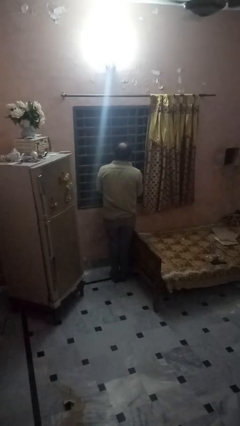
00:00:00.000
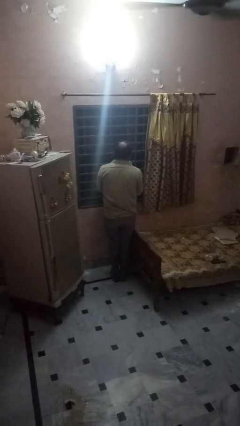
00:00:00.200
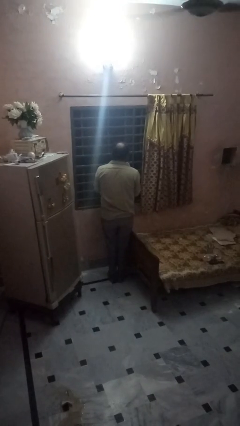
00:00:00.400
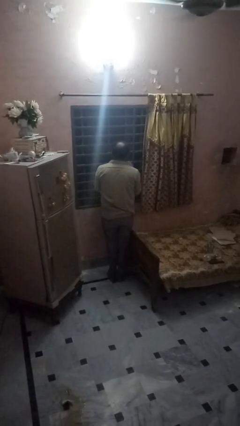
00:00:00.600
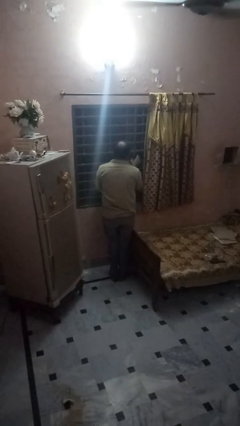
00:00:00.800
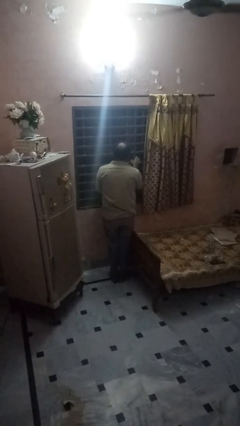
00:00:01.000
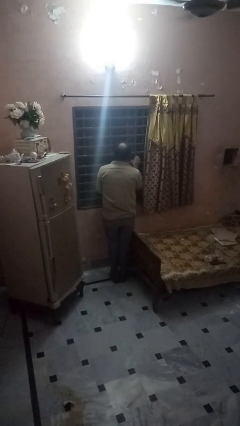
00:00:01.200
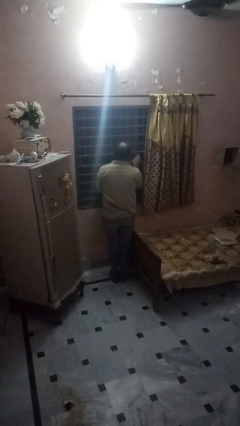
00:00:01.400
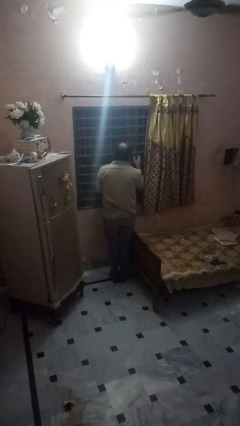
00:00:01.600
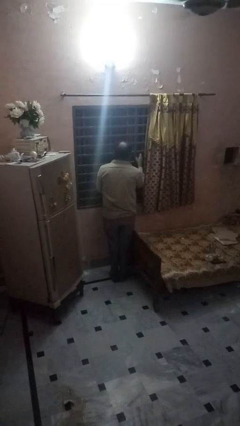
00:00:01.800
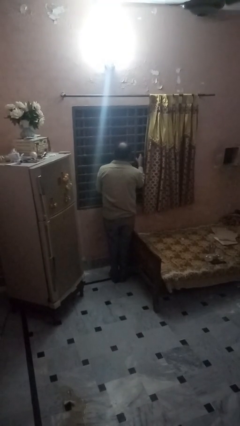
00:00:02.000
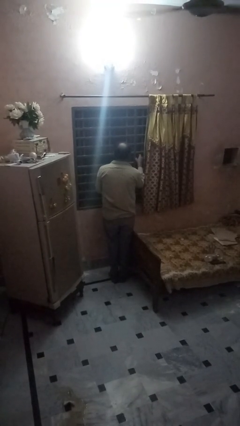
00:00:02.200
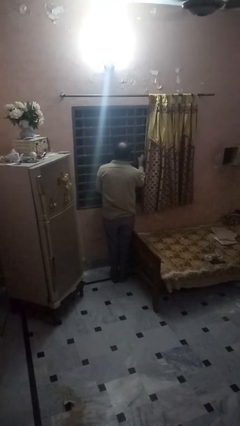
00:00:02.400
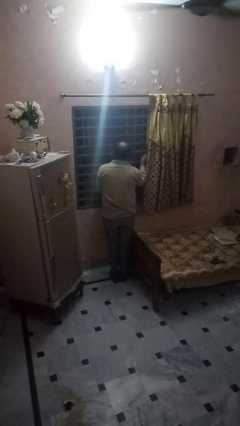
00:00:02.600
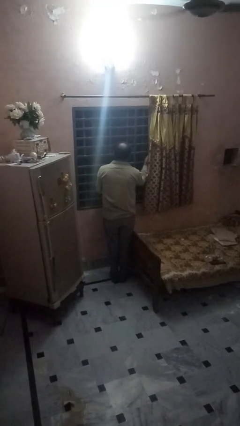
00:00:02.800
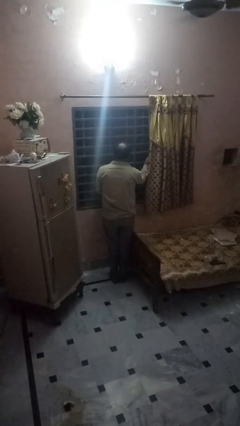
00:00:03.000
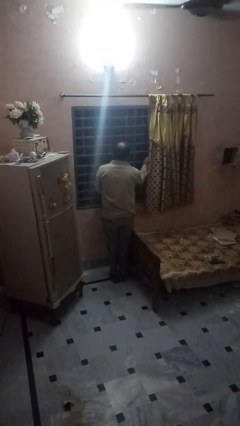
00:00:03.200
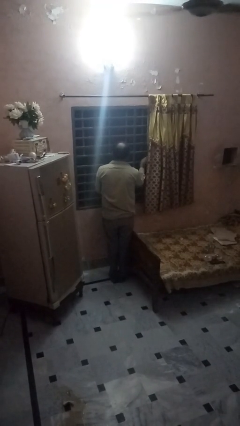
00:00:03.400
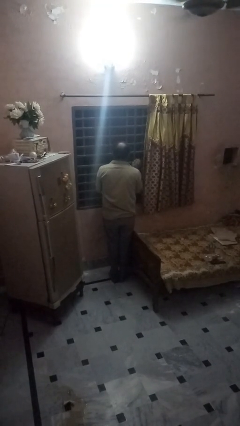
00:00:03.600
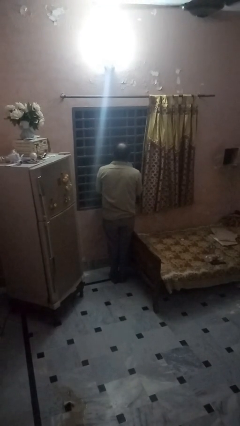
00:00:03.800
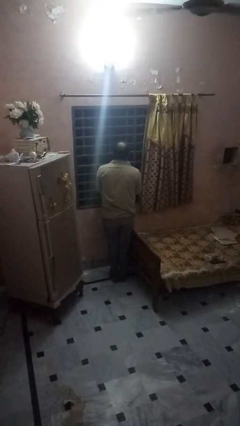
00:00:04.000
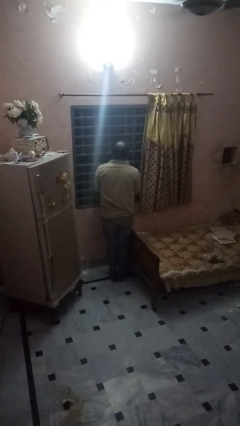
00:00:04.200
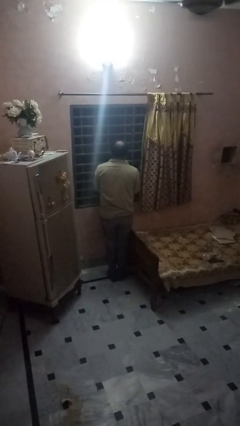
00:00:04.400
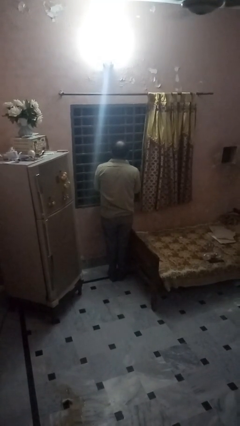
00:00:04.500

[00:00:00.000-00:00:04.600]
person opens home window

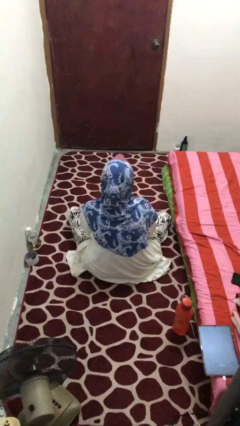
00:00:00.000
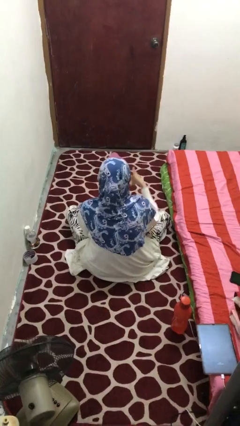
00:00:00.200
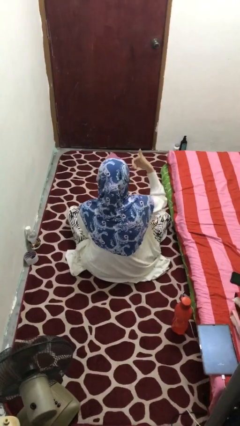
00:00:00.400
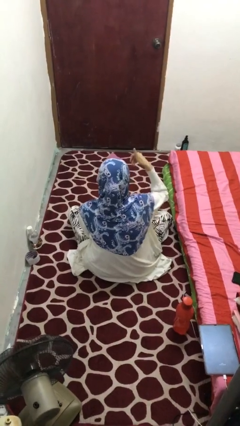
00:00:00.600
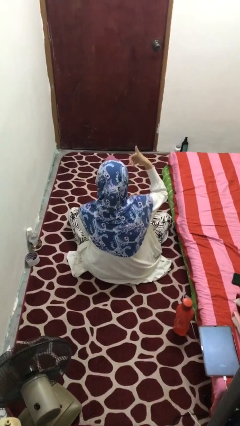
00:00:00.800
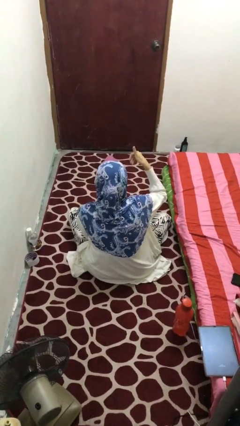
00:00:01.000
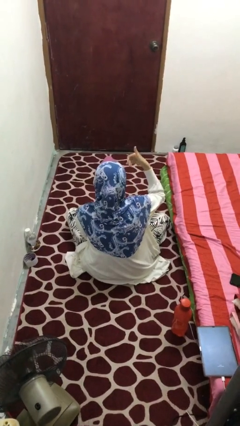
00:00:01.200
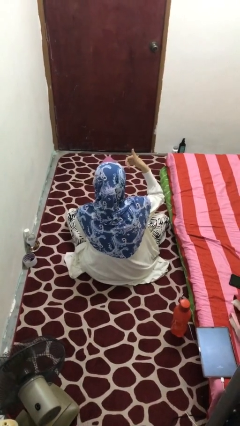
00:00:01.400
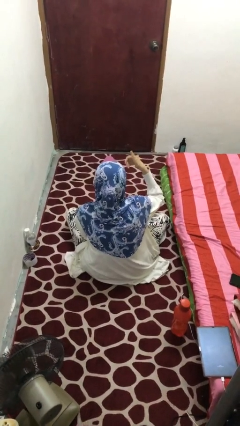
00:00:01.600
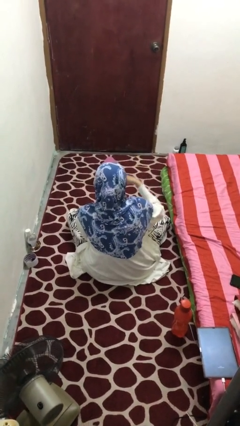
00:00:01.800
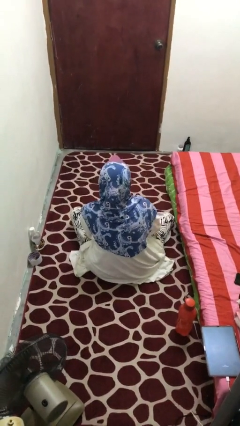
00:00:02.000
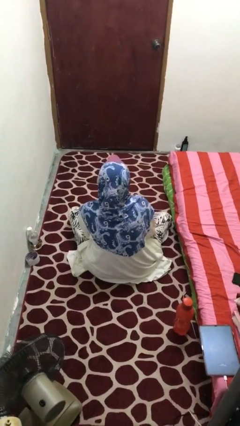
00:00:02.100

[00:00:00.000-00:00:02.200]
person gestures hang loose

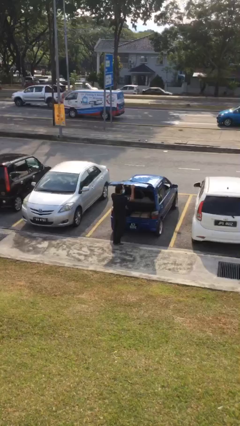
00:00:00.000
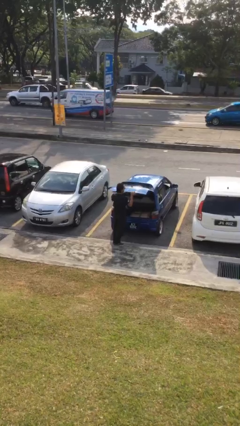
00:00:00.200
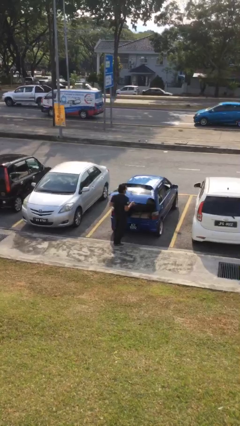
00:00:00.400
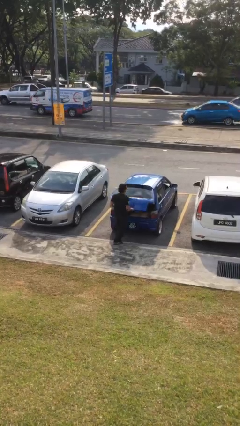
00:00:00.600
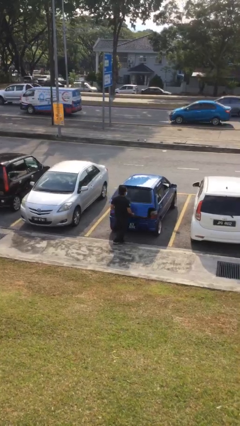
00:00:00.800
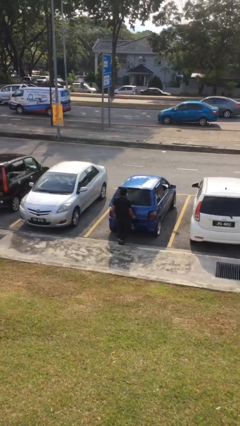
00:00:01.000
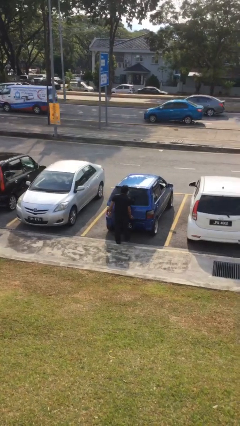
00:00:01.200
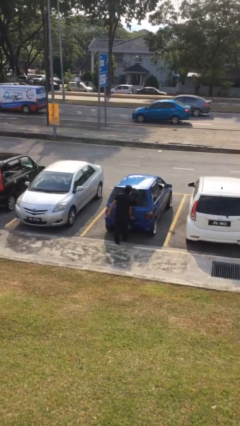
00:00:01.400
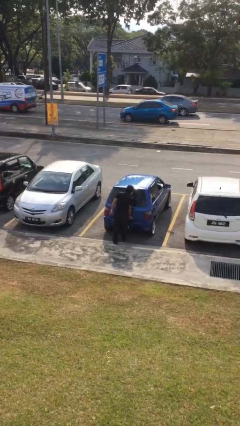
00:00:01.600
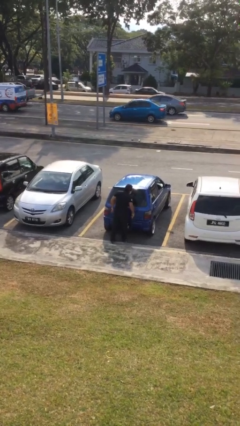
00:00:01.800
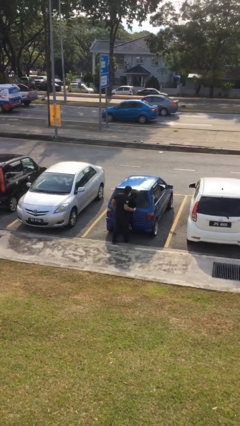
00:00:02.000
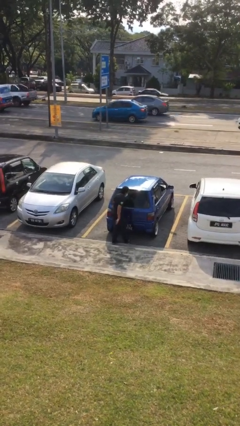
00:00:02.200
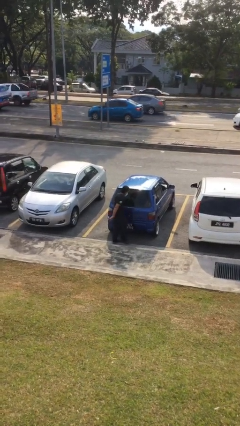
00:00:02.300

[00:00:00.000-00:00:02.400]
person closes car trunk

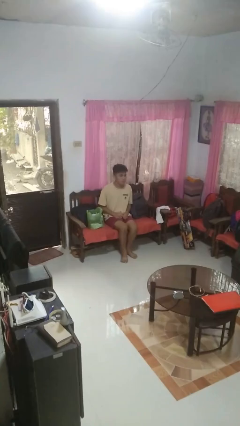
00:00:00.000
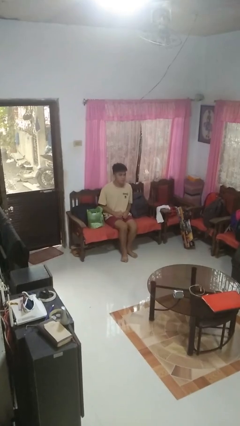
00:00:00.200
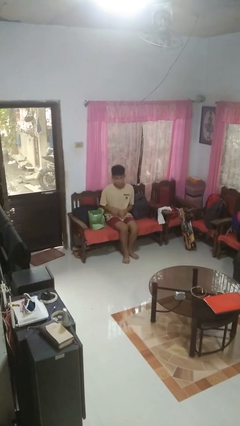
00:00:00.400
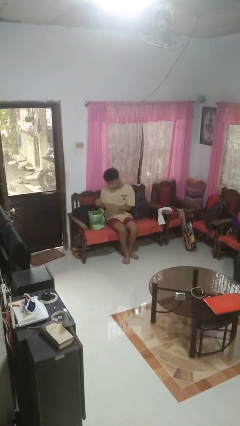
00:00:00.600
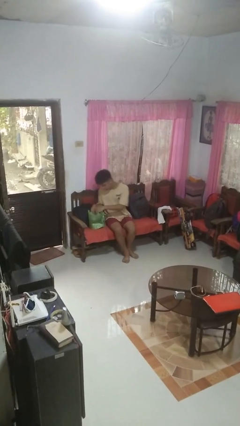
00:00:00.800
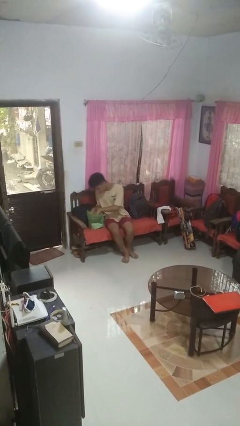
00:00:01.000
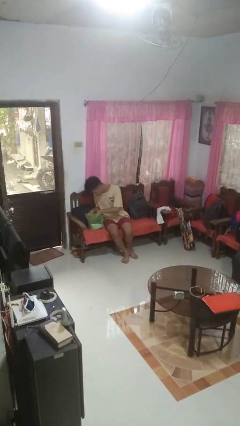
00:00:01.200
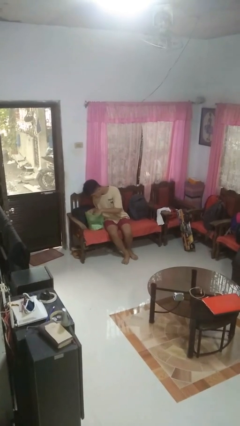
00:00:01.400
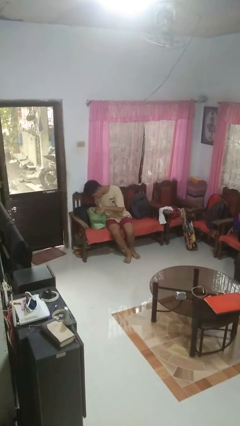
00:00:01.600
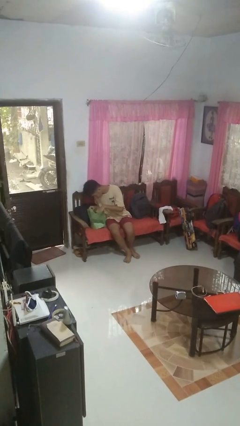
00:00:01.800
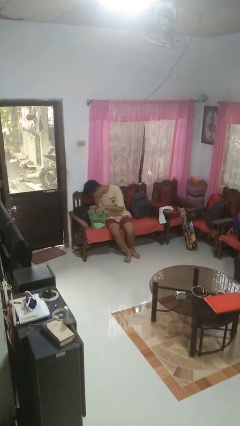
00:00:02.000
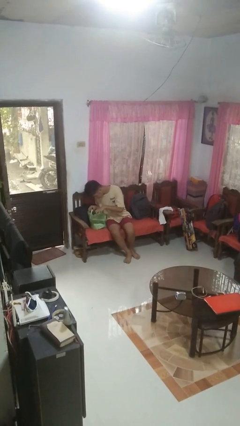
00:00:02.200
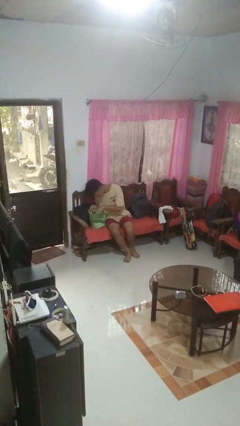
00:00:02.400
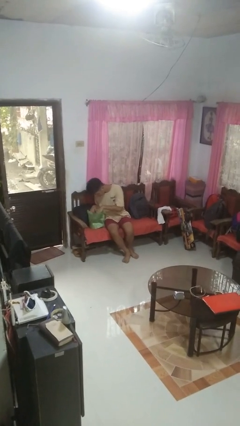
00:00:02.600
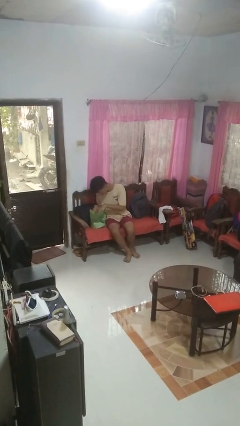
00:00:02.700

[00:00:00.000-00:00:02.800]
person searches in bag

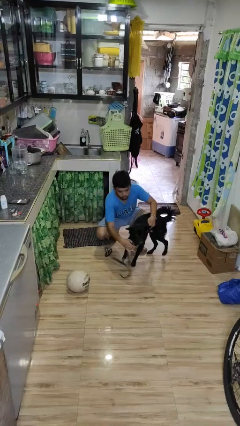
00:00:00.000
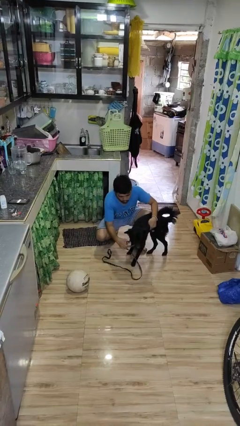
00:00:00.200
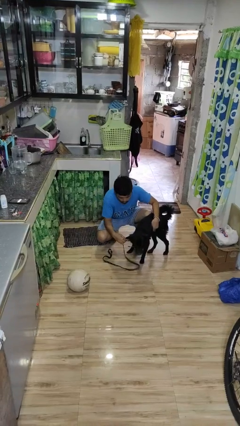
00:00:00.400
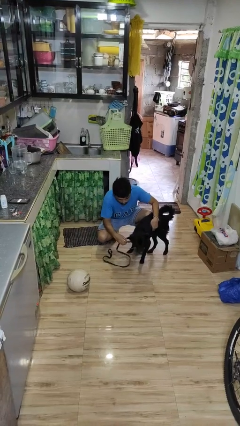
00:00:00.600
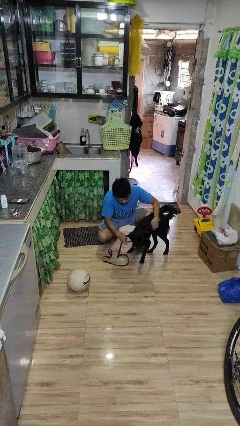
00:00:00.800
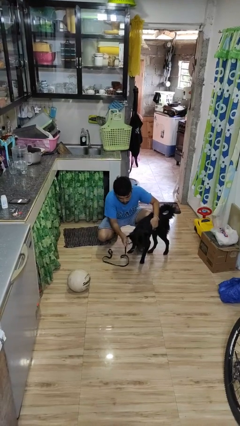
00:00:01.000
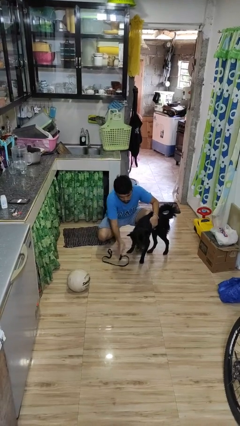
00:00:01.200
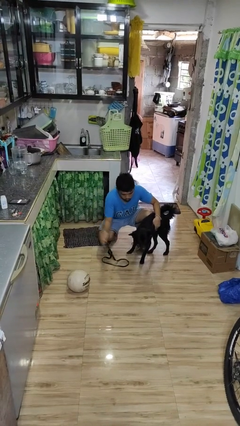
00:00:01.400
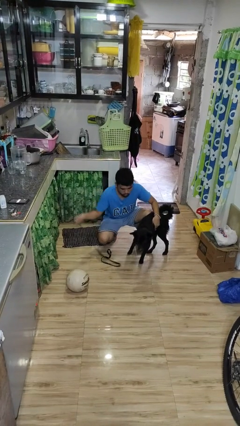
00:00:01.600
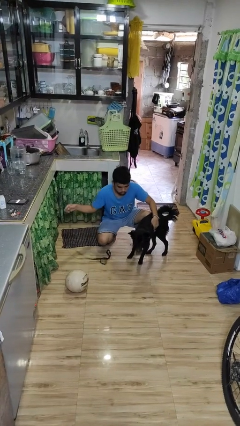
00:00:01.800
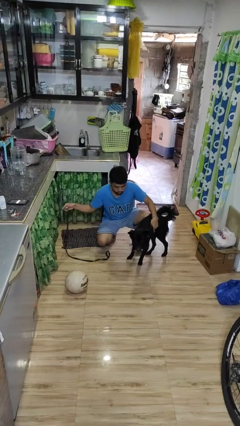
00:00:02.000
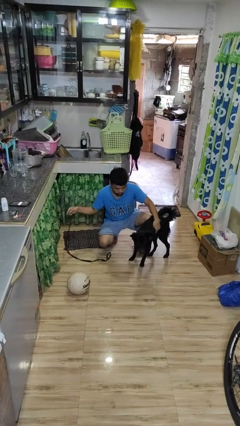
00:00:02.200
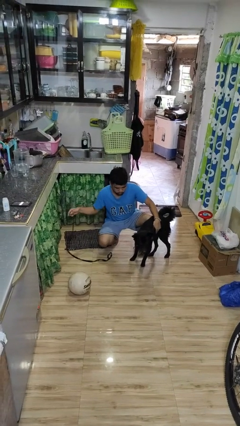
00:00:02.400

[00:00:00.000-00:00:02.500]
person unattaches leash from dog

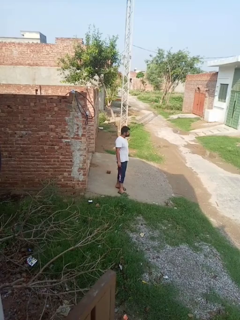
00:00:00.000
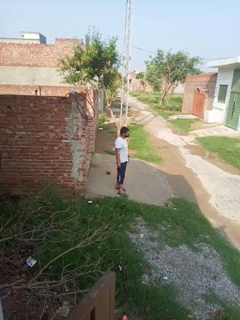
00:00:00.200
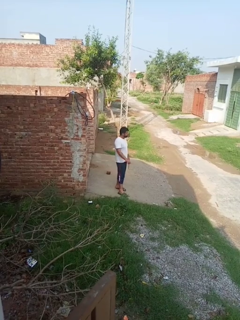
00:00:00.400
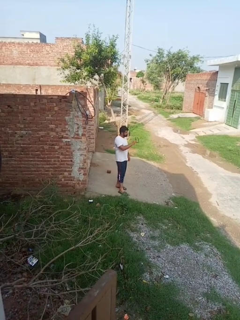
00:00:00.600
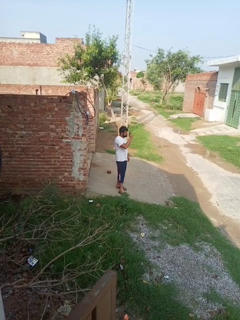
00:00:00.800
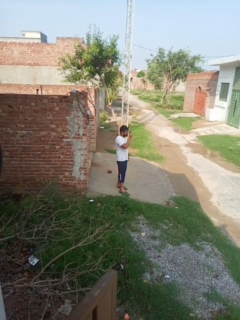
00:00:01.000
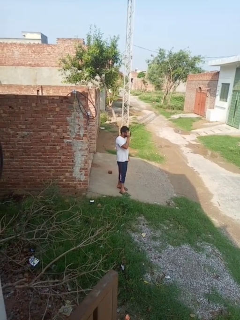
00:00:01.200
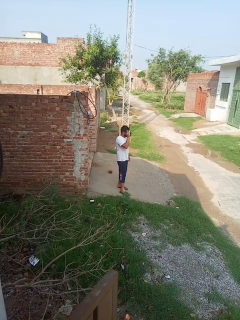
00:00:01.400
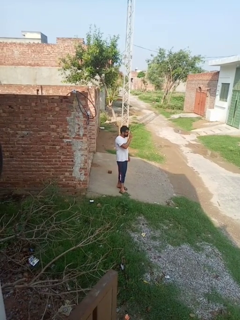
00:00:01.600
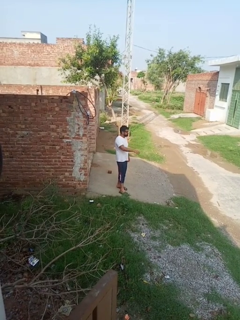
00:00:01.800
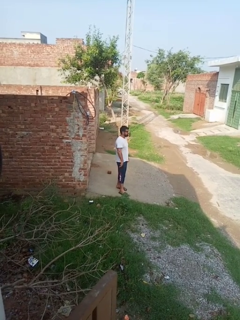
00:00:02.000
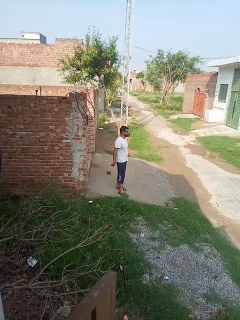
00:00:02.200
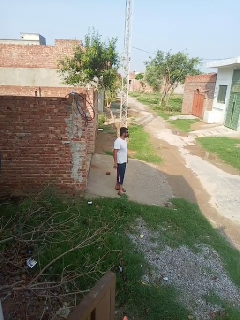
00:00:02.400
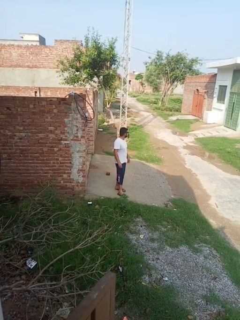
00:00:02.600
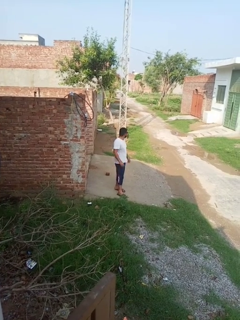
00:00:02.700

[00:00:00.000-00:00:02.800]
person puts on glasses

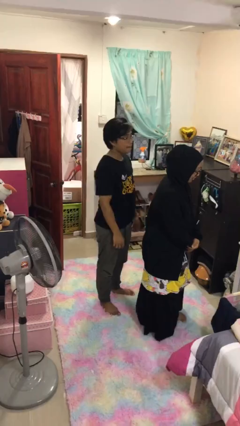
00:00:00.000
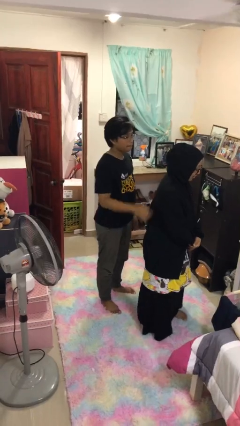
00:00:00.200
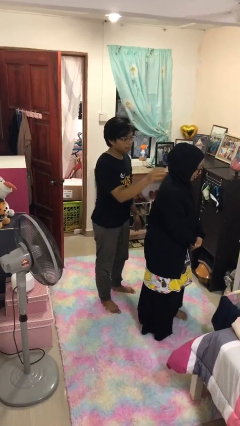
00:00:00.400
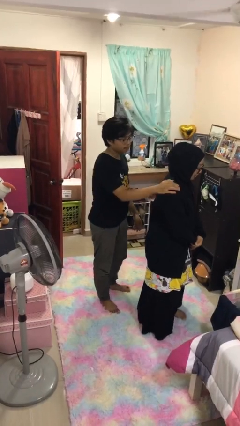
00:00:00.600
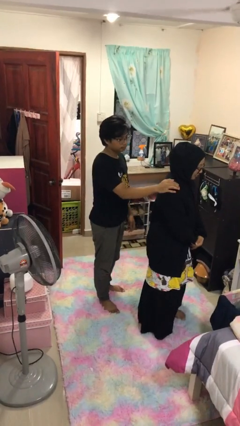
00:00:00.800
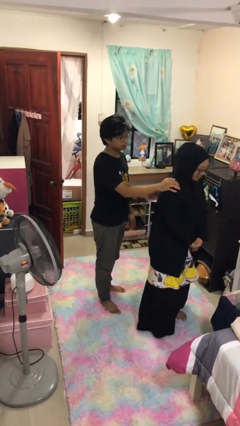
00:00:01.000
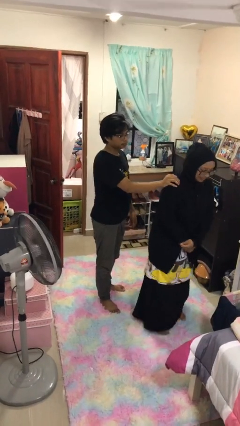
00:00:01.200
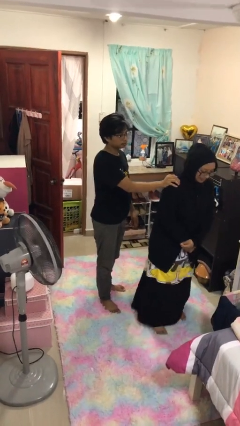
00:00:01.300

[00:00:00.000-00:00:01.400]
person grabs person by shoulder
